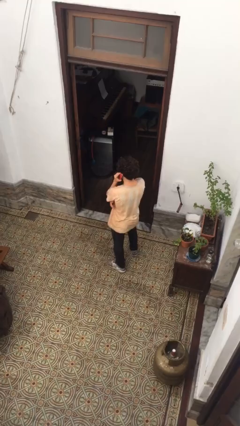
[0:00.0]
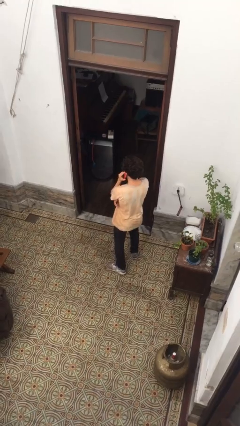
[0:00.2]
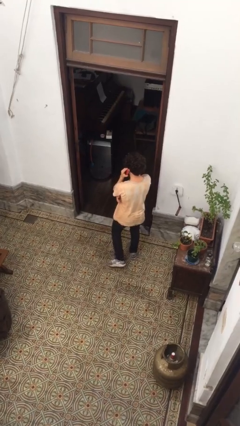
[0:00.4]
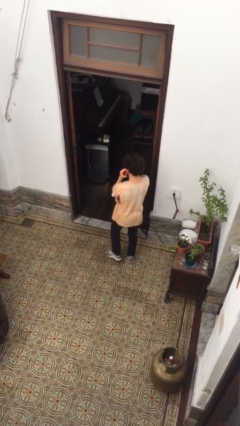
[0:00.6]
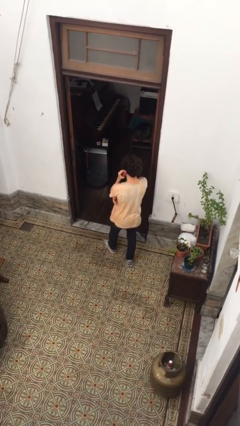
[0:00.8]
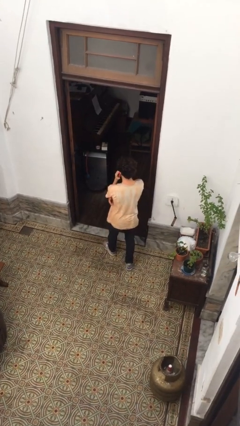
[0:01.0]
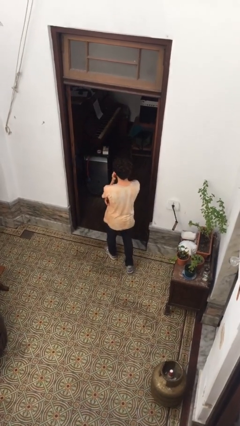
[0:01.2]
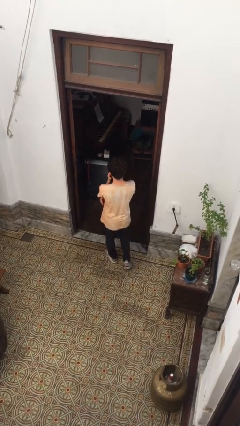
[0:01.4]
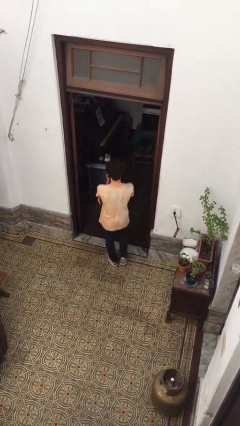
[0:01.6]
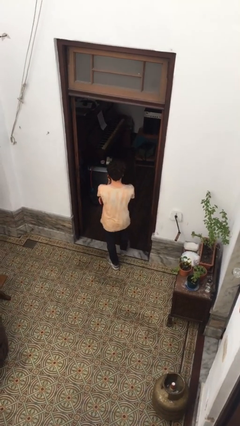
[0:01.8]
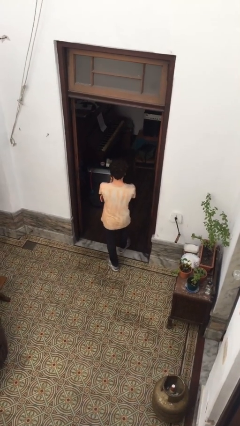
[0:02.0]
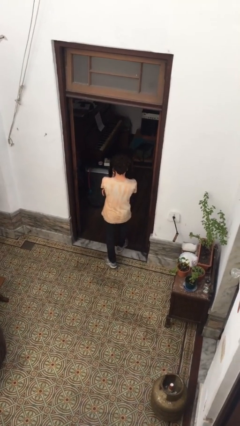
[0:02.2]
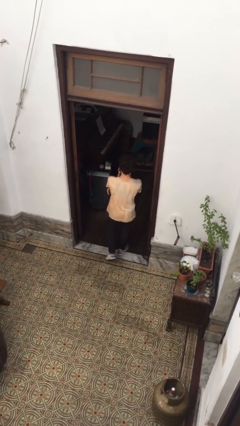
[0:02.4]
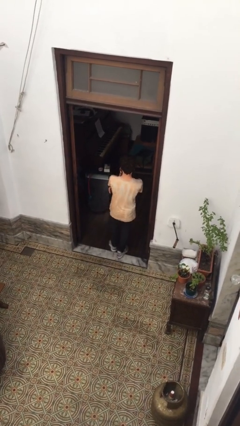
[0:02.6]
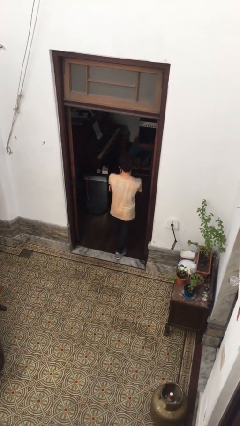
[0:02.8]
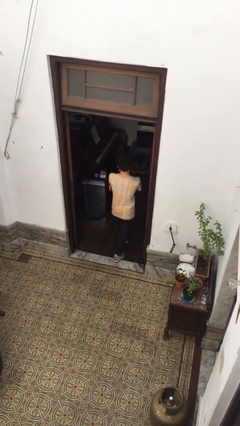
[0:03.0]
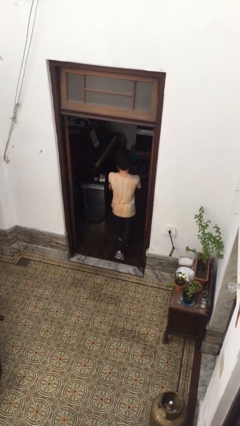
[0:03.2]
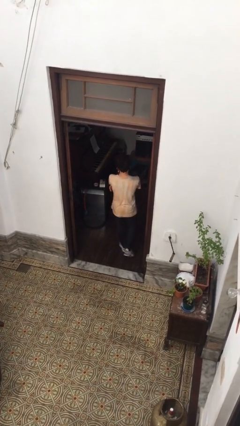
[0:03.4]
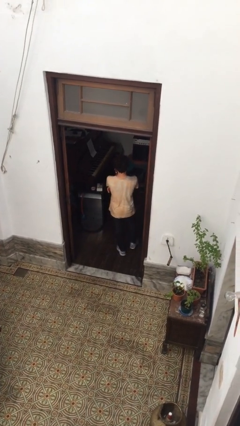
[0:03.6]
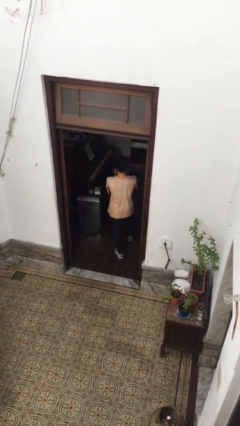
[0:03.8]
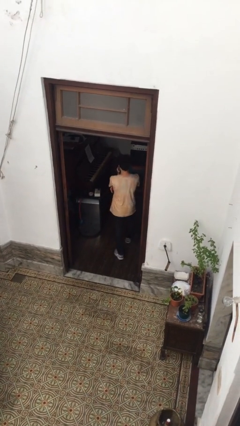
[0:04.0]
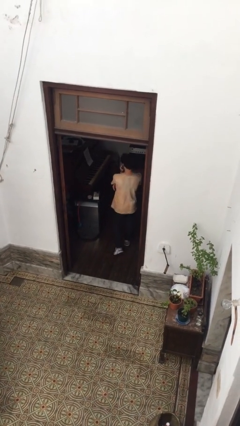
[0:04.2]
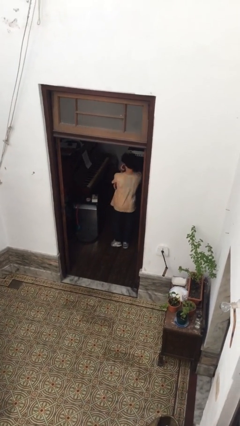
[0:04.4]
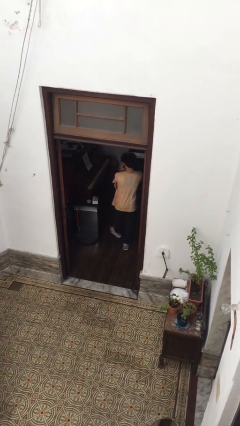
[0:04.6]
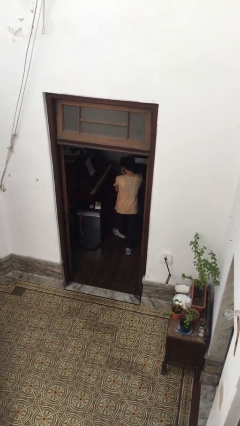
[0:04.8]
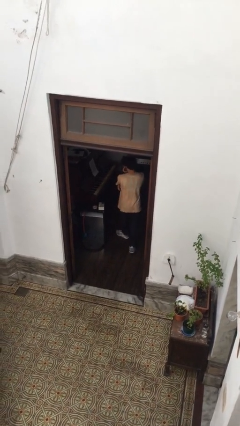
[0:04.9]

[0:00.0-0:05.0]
person exits scene through structure

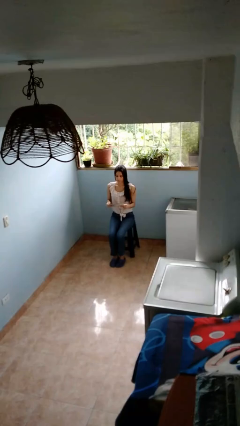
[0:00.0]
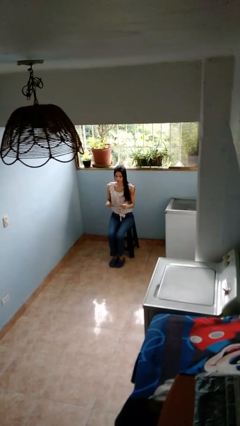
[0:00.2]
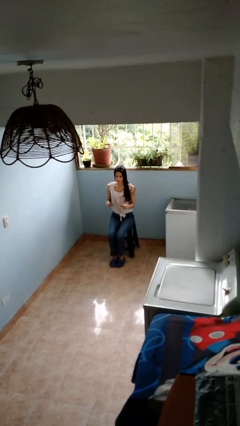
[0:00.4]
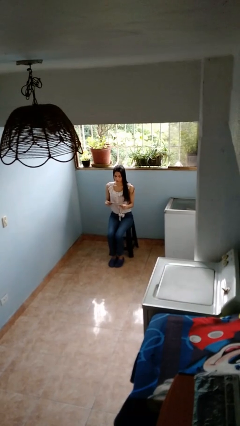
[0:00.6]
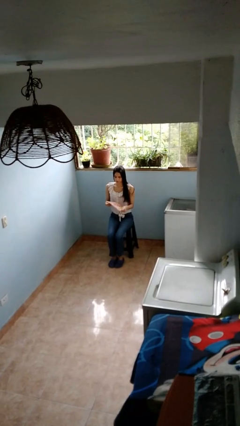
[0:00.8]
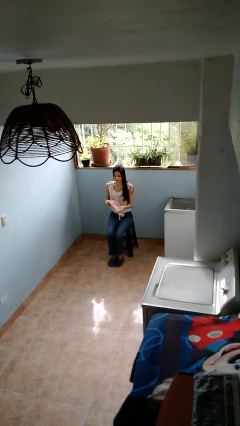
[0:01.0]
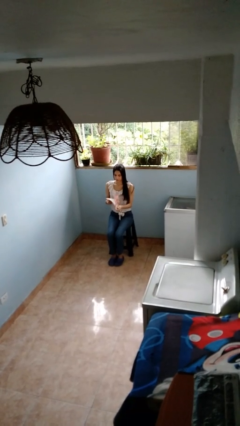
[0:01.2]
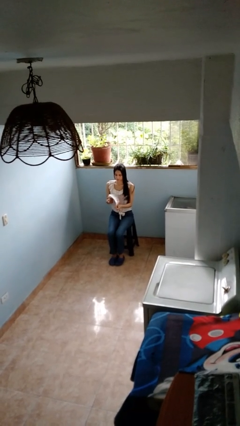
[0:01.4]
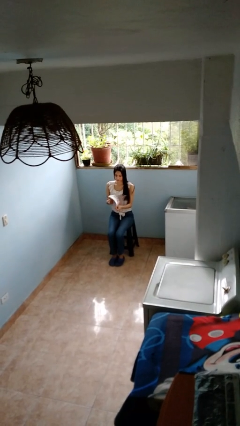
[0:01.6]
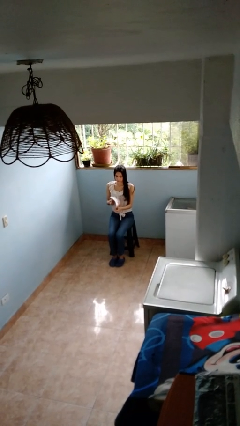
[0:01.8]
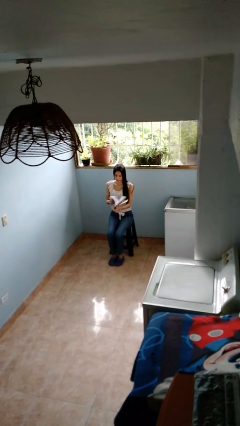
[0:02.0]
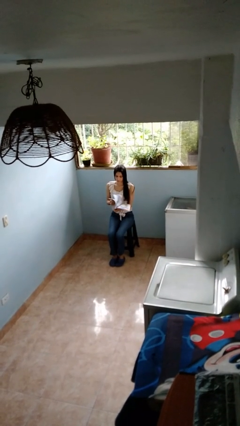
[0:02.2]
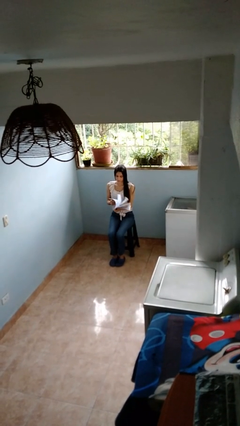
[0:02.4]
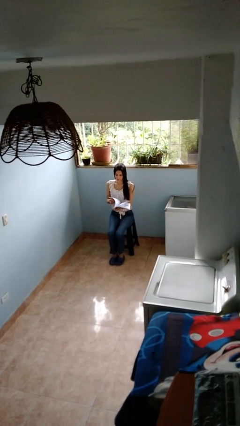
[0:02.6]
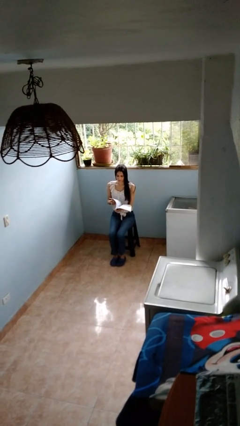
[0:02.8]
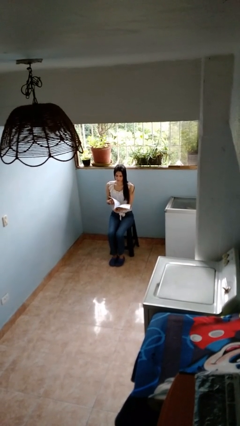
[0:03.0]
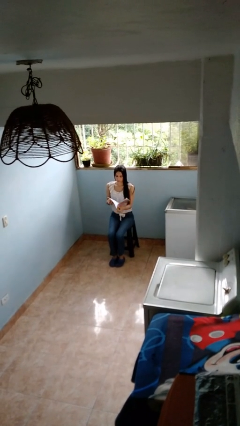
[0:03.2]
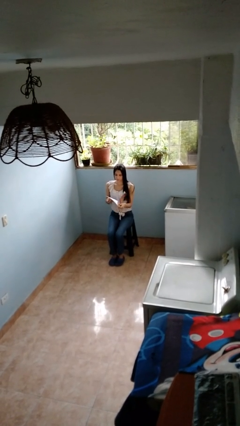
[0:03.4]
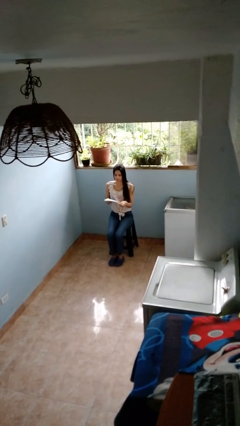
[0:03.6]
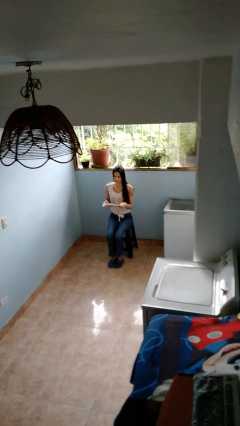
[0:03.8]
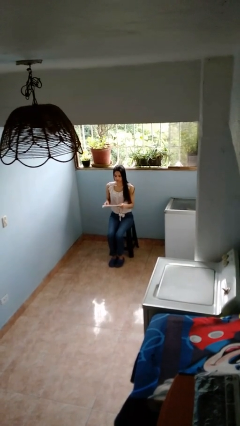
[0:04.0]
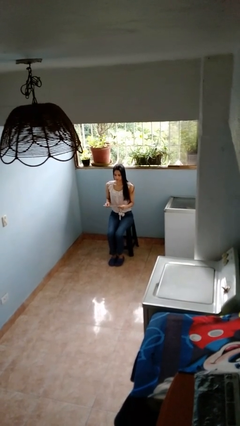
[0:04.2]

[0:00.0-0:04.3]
person reads magazine

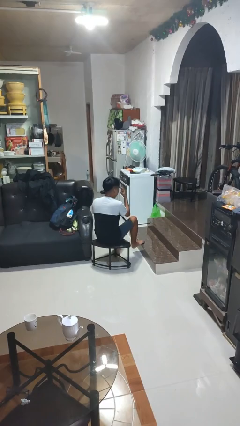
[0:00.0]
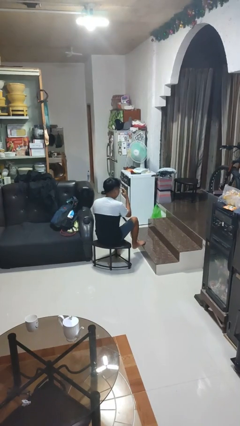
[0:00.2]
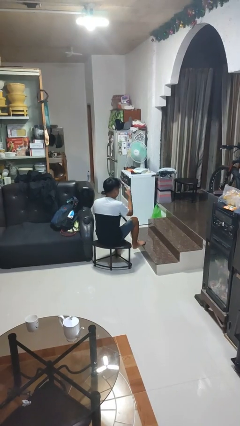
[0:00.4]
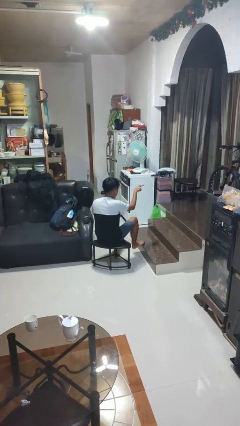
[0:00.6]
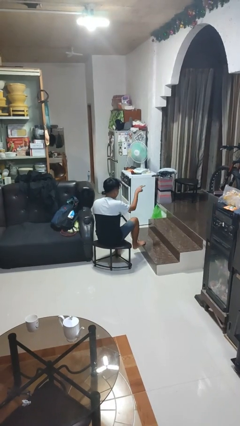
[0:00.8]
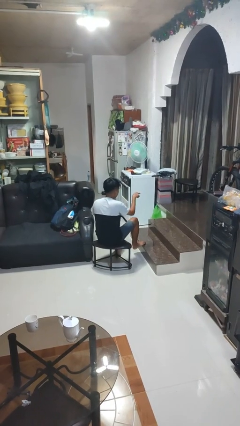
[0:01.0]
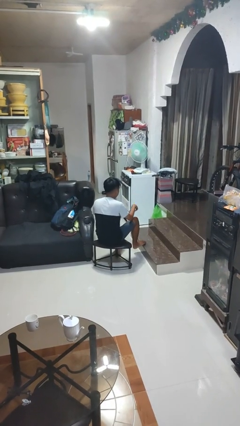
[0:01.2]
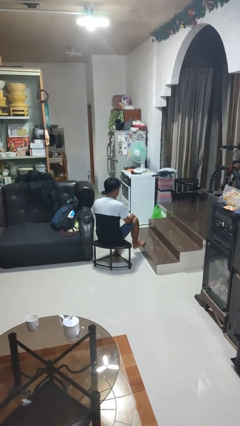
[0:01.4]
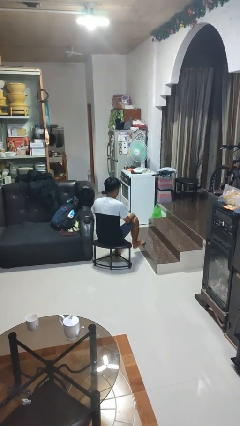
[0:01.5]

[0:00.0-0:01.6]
person gestures watch closely

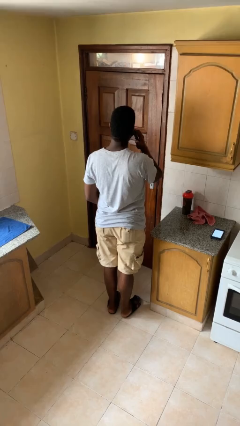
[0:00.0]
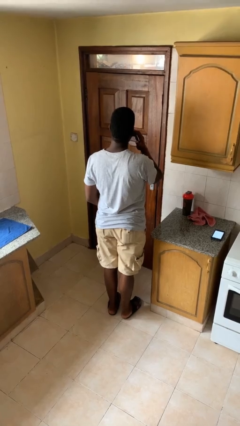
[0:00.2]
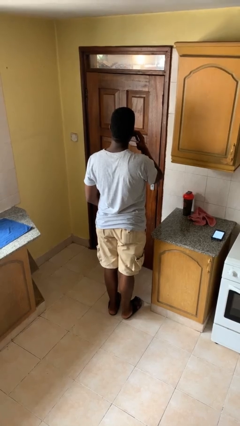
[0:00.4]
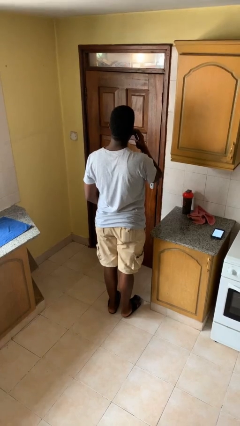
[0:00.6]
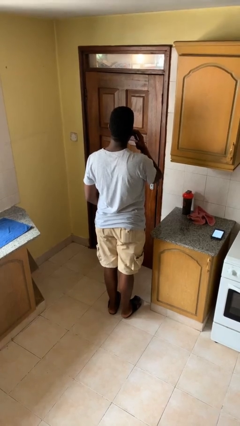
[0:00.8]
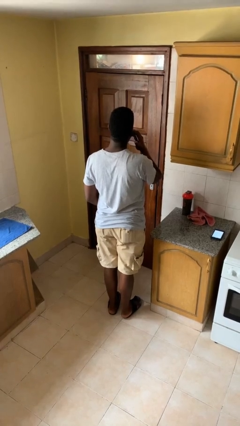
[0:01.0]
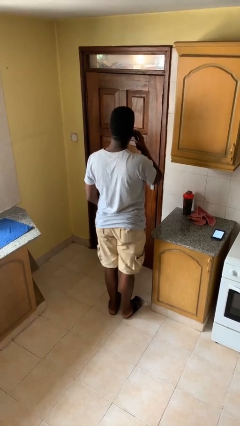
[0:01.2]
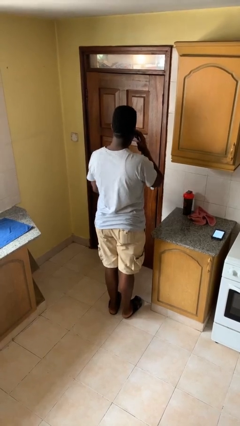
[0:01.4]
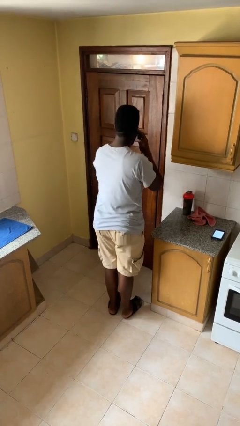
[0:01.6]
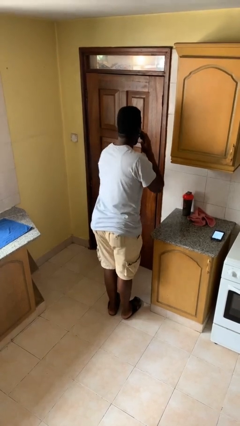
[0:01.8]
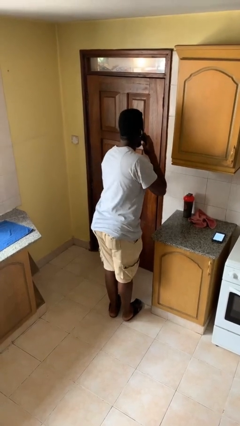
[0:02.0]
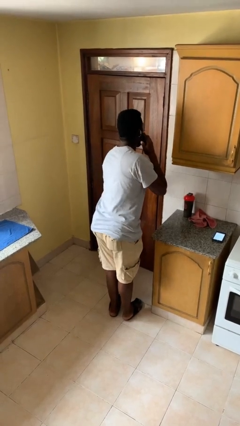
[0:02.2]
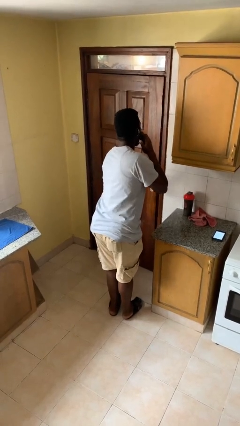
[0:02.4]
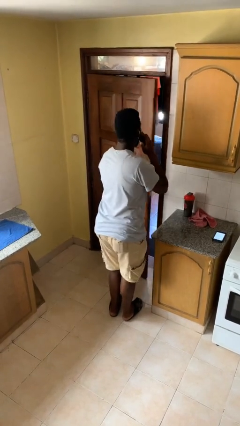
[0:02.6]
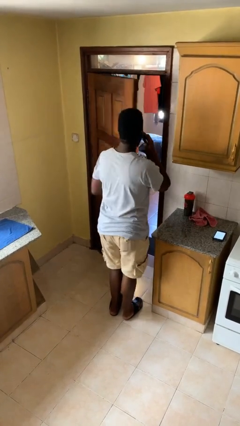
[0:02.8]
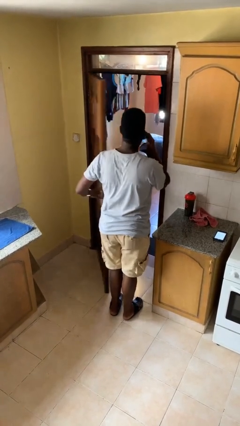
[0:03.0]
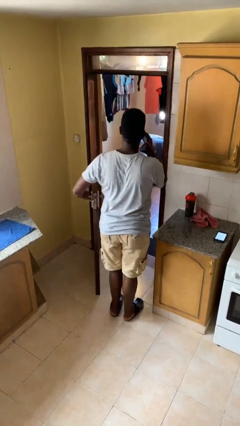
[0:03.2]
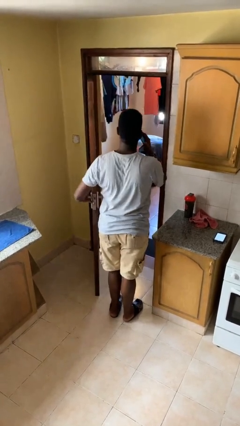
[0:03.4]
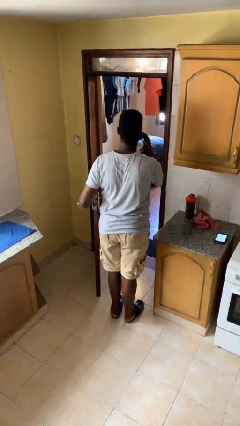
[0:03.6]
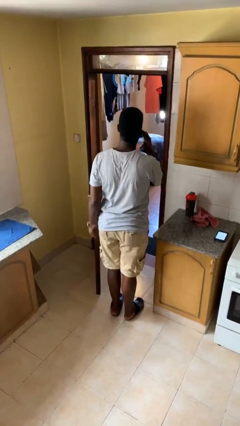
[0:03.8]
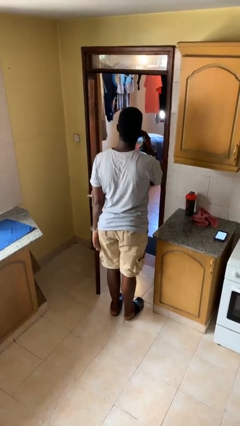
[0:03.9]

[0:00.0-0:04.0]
person opens facility door

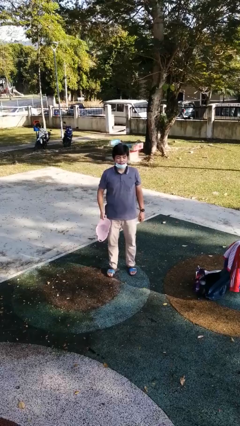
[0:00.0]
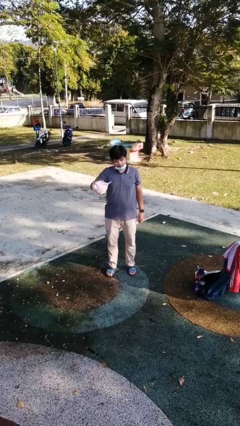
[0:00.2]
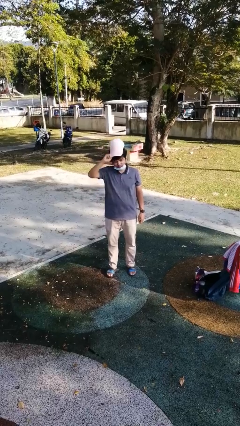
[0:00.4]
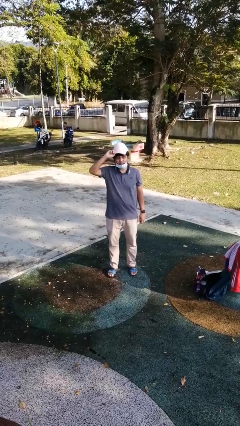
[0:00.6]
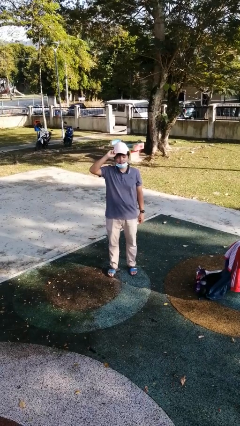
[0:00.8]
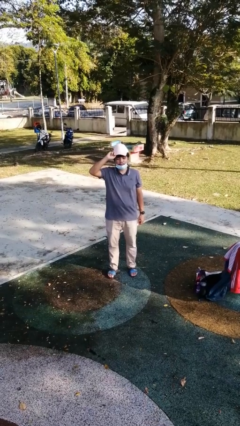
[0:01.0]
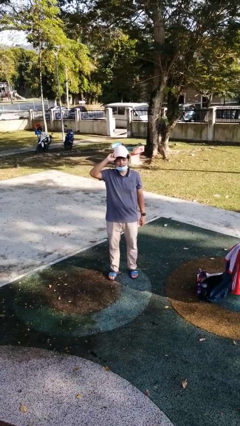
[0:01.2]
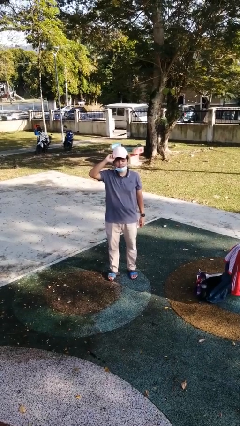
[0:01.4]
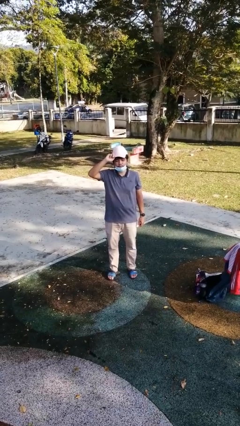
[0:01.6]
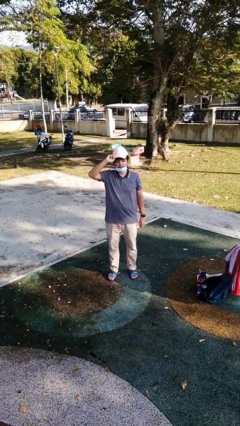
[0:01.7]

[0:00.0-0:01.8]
person puts on hat

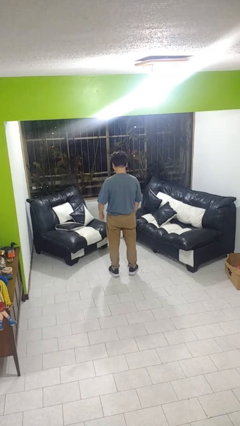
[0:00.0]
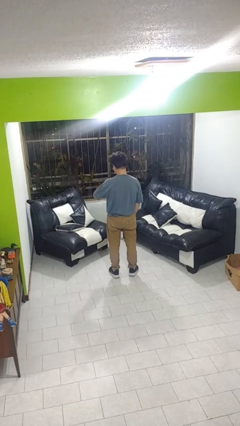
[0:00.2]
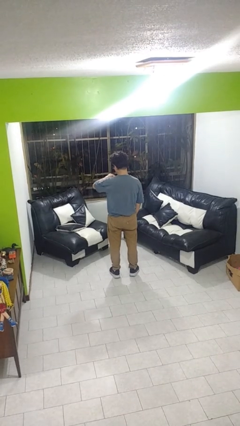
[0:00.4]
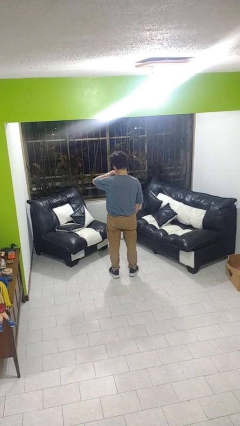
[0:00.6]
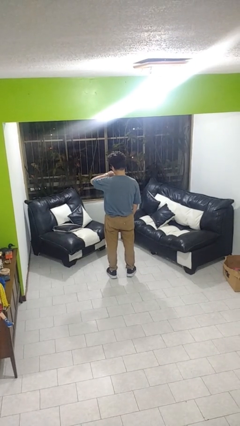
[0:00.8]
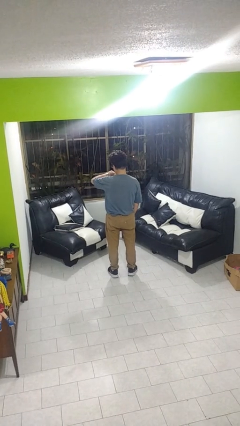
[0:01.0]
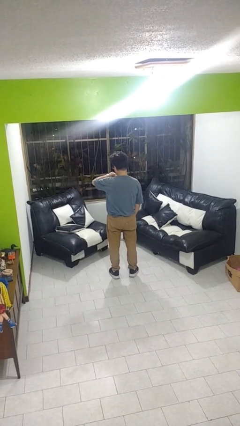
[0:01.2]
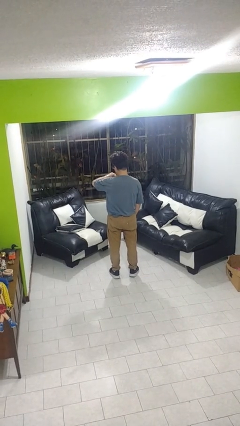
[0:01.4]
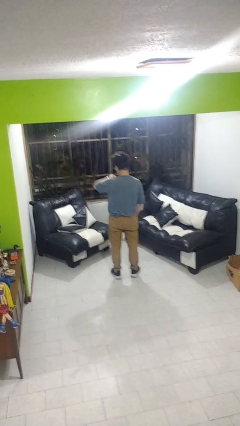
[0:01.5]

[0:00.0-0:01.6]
person looks at wristwatch
